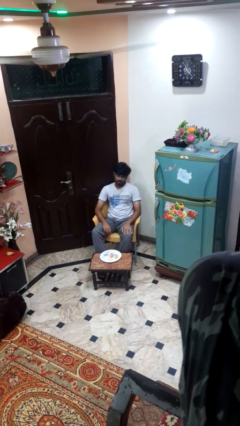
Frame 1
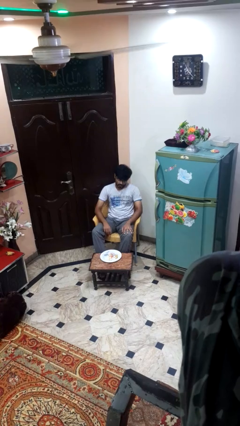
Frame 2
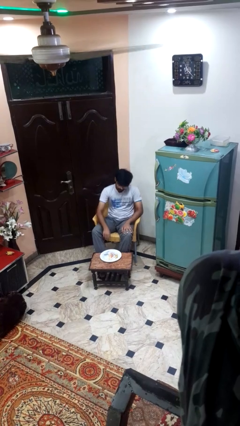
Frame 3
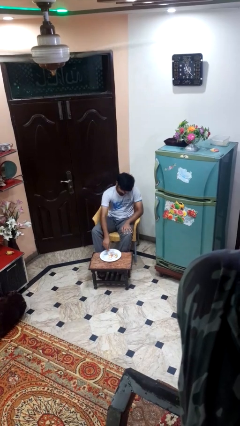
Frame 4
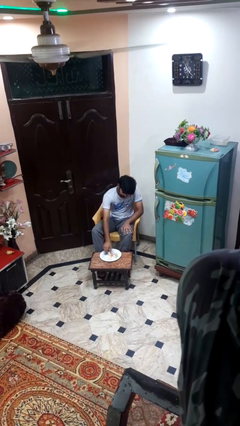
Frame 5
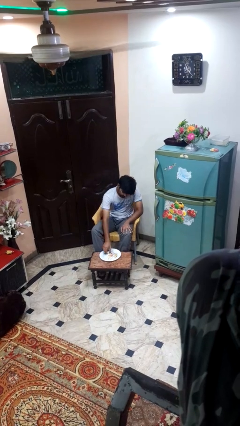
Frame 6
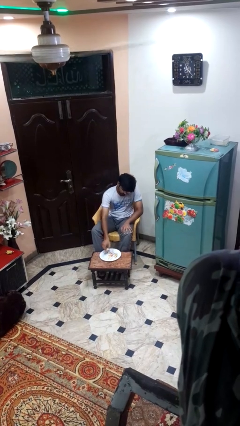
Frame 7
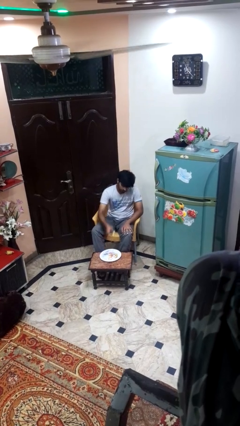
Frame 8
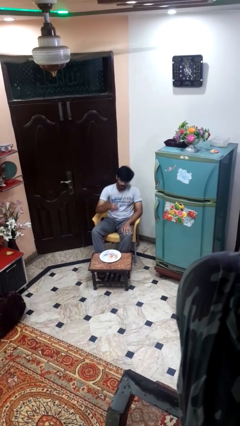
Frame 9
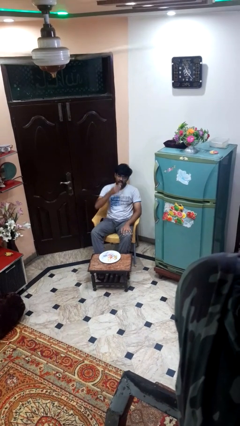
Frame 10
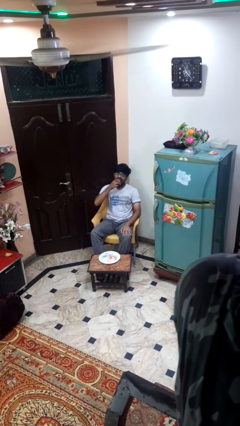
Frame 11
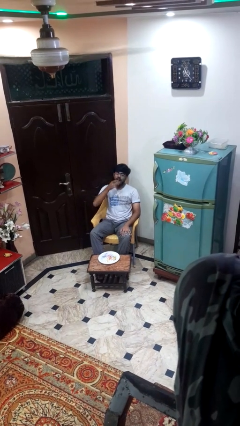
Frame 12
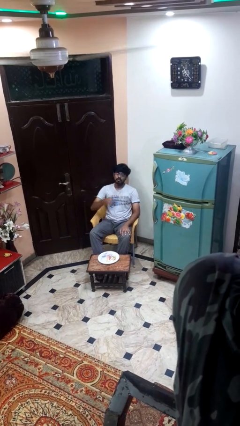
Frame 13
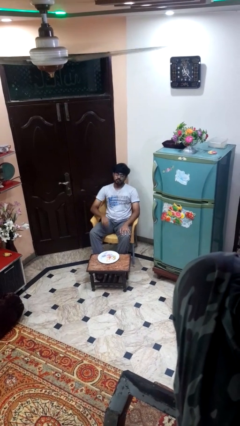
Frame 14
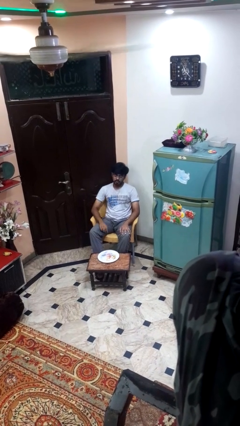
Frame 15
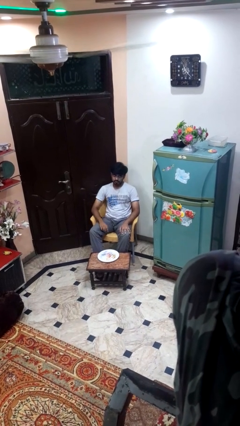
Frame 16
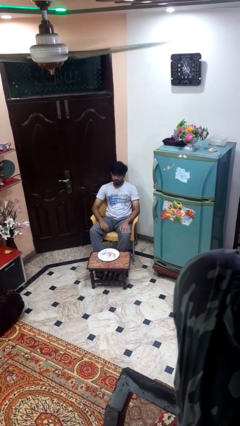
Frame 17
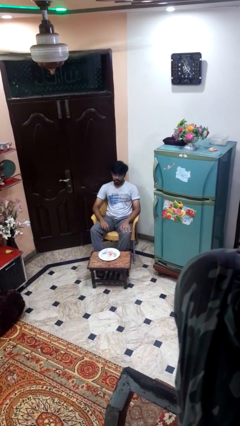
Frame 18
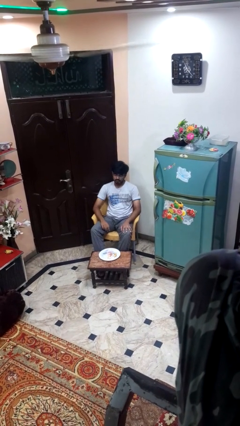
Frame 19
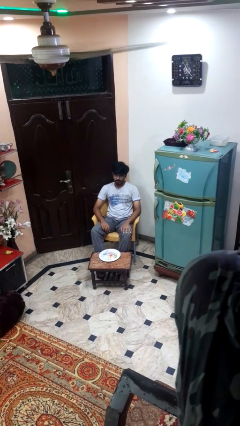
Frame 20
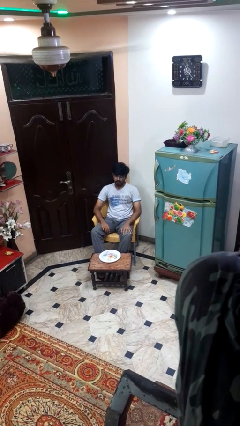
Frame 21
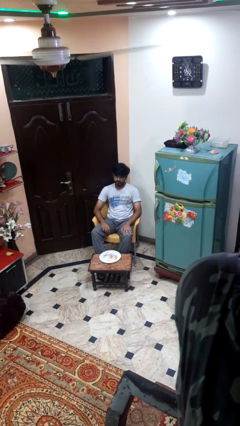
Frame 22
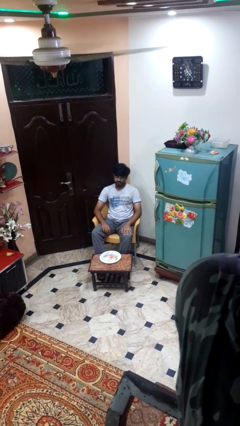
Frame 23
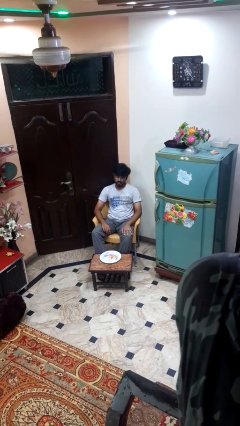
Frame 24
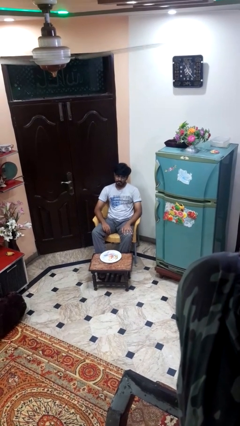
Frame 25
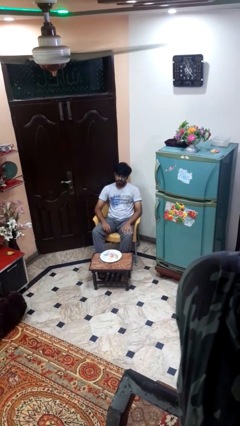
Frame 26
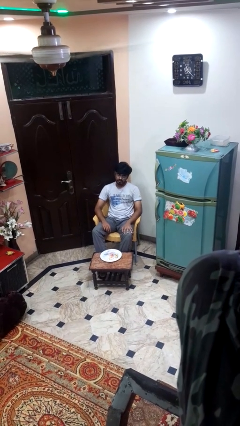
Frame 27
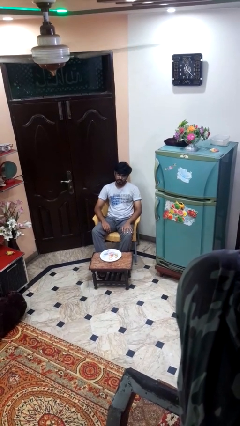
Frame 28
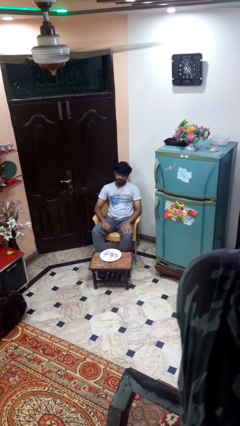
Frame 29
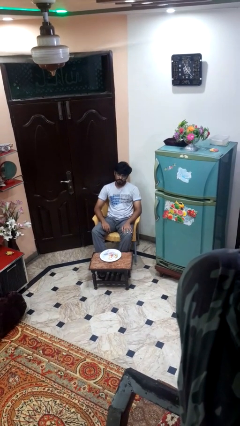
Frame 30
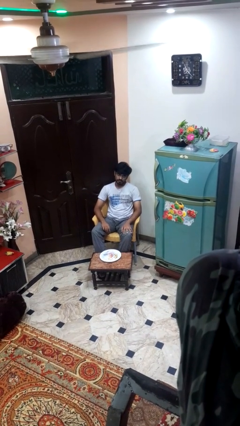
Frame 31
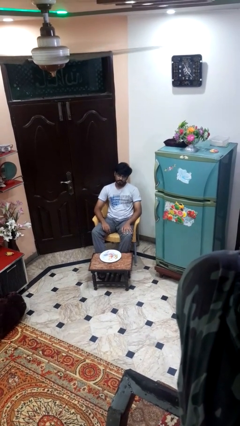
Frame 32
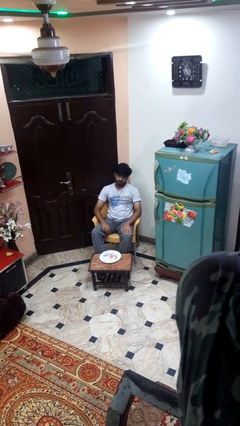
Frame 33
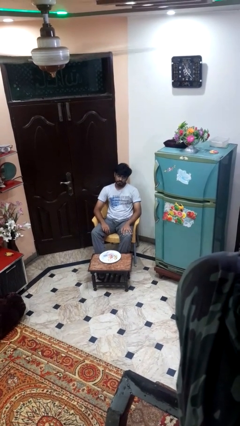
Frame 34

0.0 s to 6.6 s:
person eats with hands

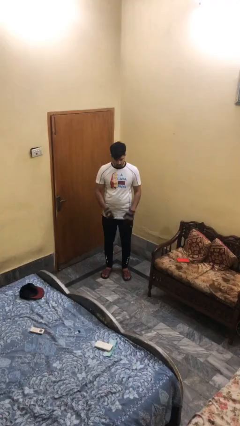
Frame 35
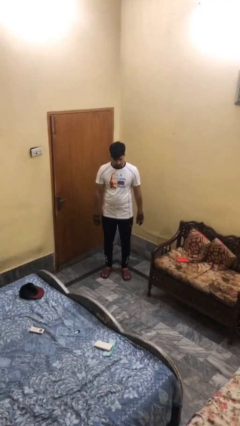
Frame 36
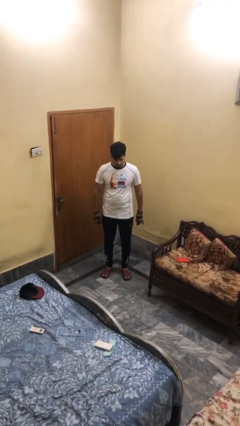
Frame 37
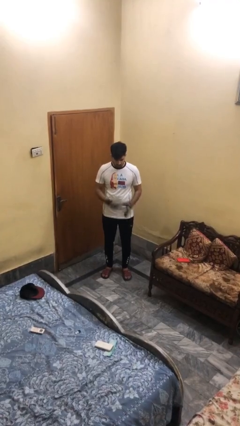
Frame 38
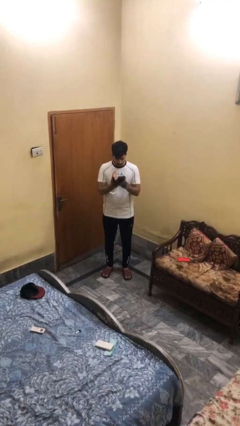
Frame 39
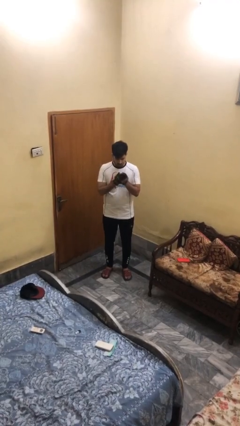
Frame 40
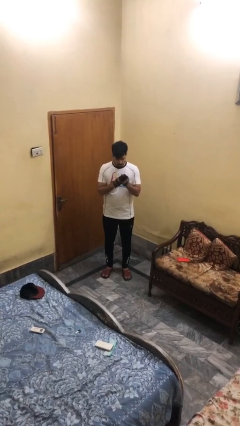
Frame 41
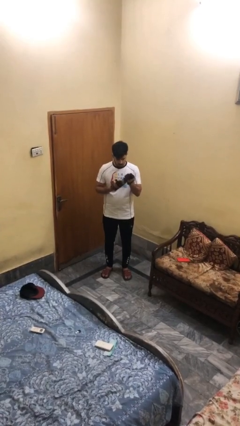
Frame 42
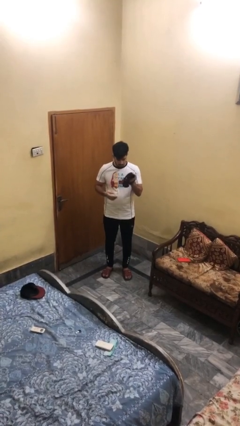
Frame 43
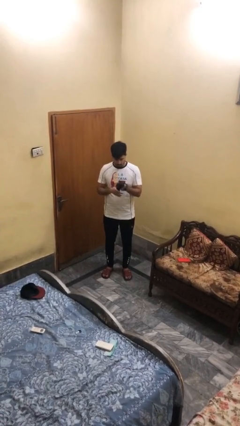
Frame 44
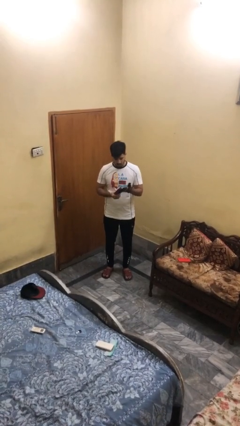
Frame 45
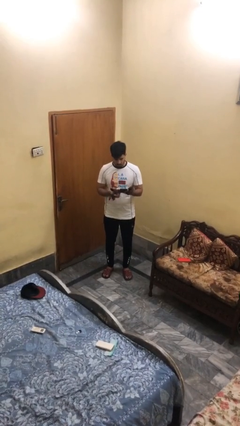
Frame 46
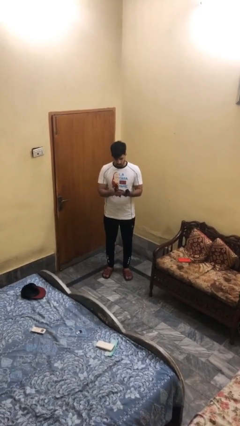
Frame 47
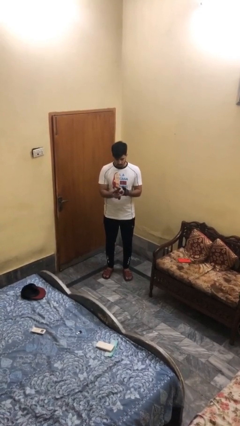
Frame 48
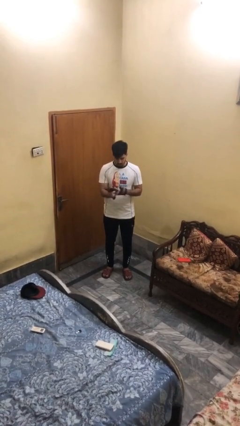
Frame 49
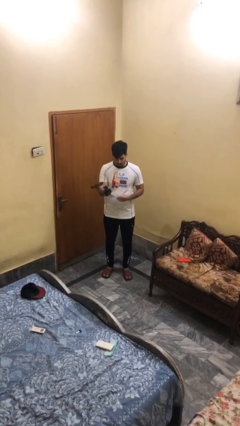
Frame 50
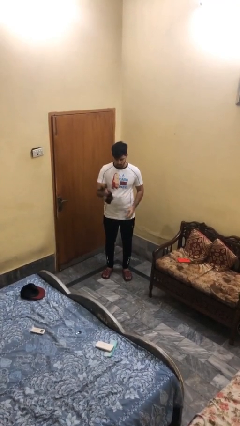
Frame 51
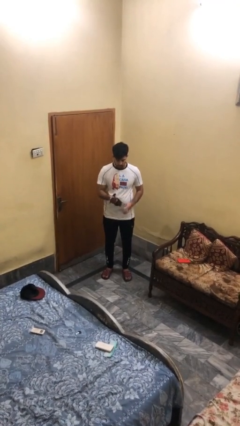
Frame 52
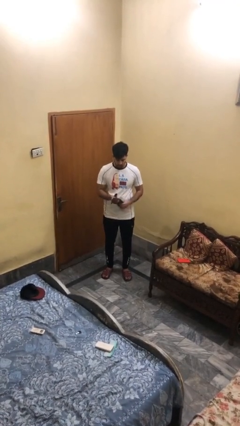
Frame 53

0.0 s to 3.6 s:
person takes off gloves

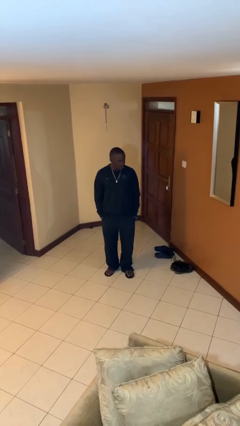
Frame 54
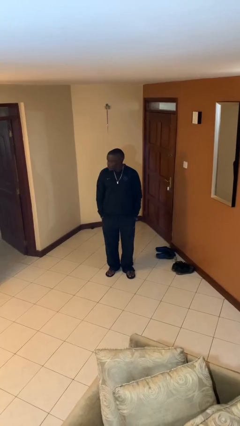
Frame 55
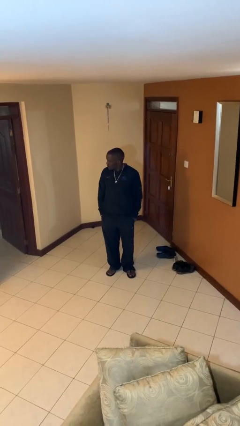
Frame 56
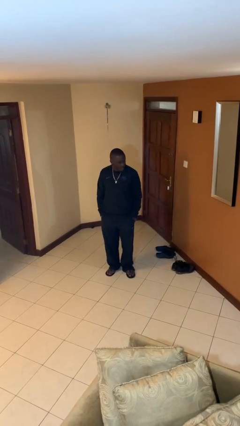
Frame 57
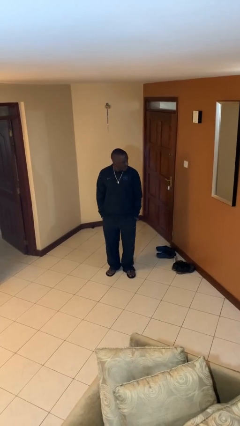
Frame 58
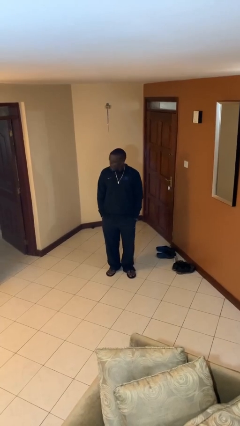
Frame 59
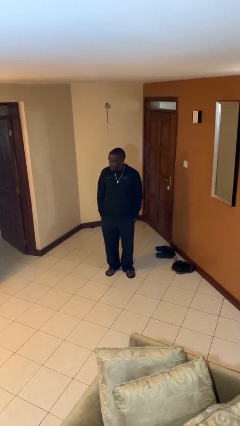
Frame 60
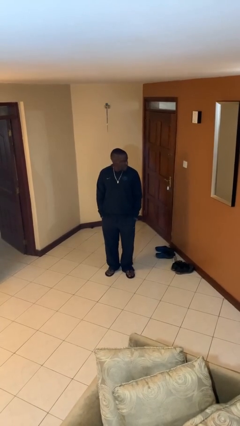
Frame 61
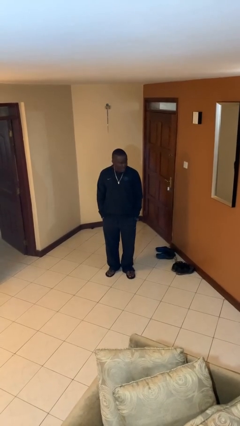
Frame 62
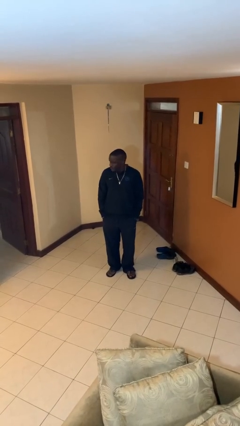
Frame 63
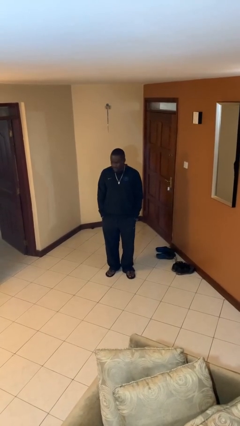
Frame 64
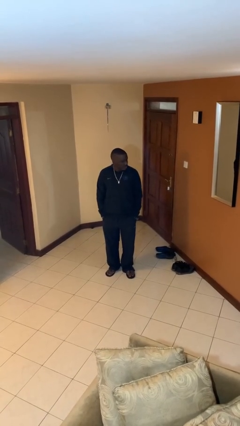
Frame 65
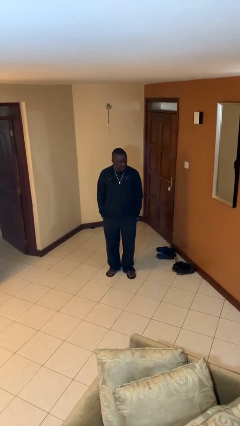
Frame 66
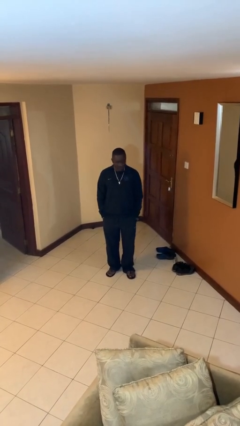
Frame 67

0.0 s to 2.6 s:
person shakes head

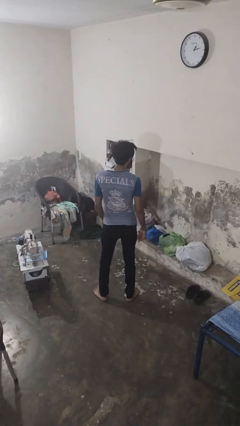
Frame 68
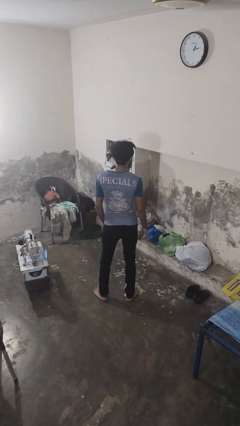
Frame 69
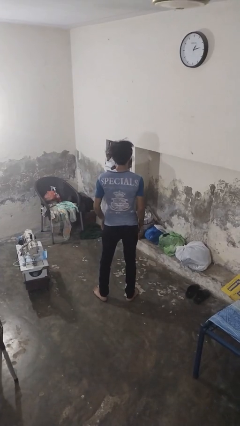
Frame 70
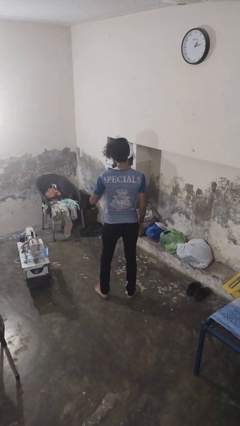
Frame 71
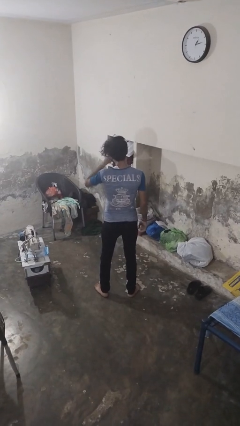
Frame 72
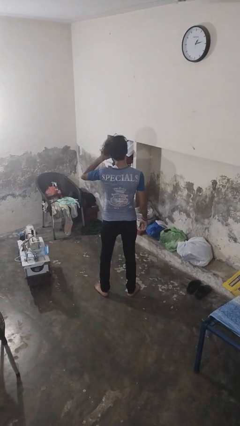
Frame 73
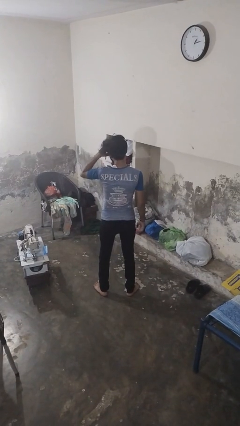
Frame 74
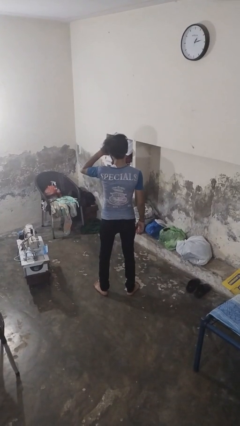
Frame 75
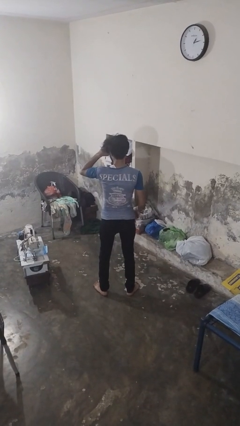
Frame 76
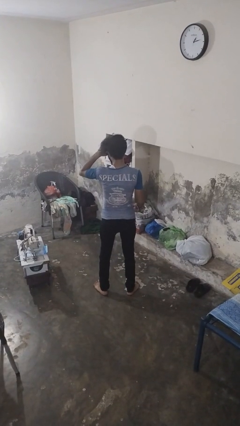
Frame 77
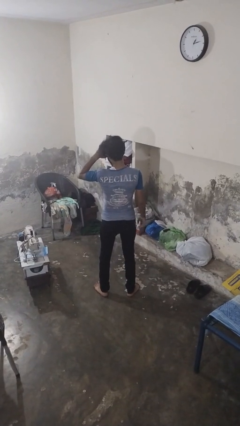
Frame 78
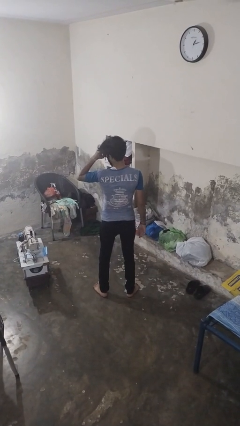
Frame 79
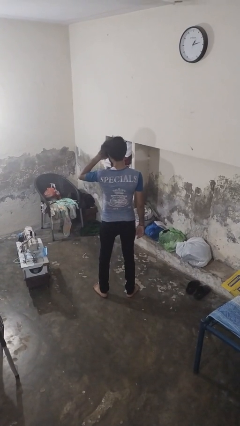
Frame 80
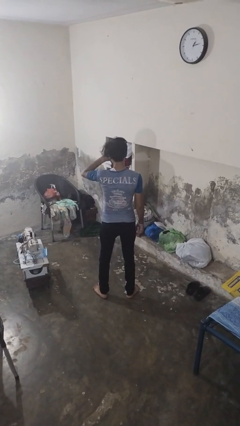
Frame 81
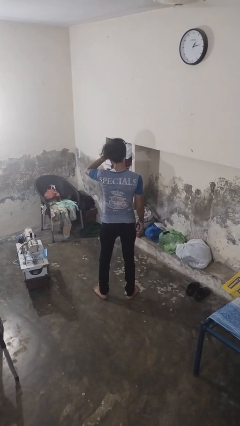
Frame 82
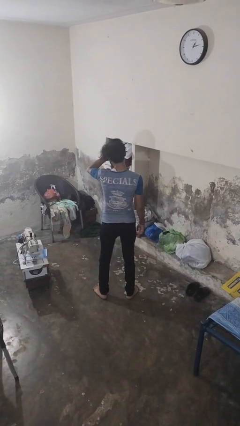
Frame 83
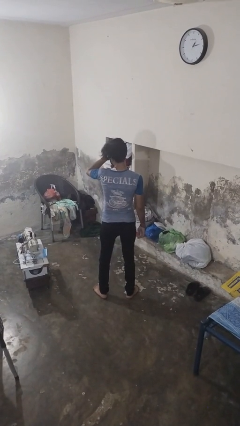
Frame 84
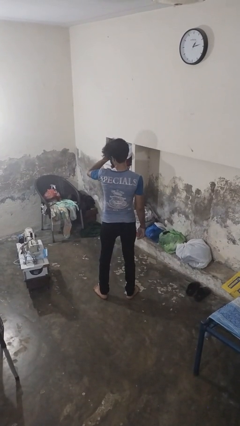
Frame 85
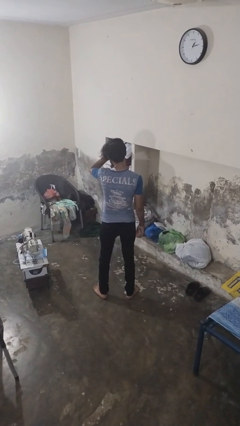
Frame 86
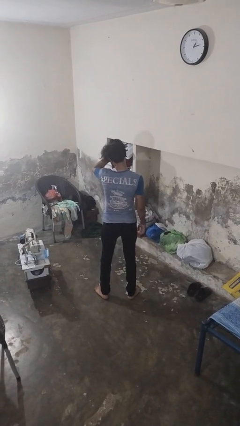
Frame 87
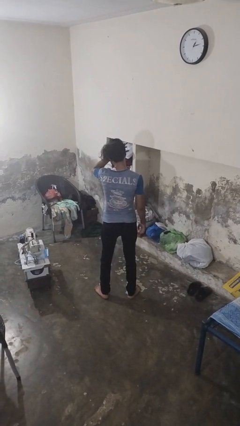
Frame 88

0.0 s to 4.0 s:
person rubs eyes

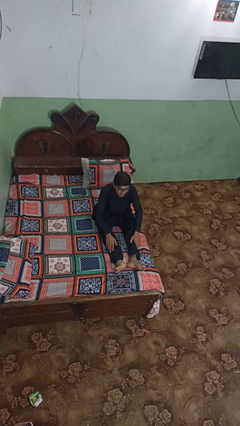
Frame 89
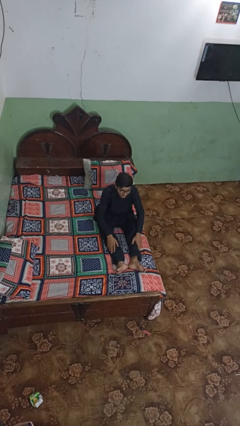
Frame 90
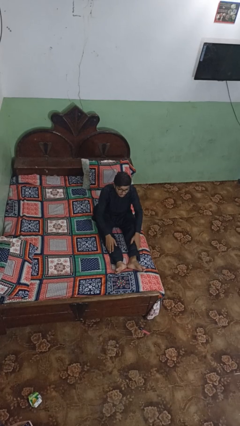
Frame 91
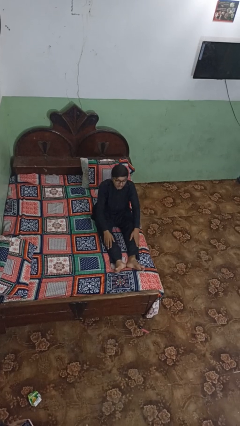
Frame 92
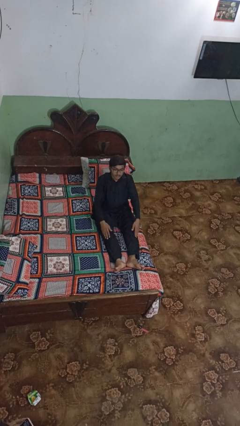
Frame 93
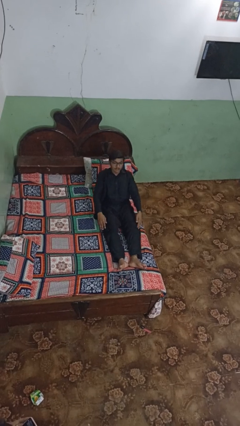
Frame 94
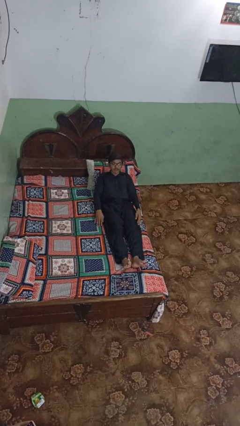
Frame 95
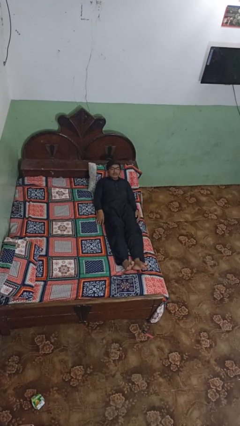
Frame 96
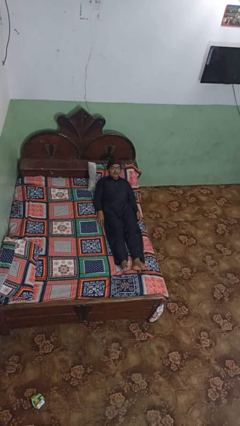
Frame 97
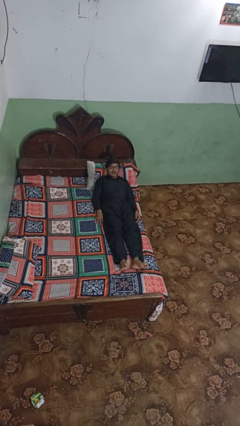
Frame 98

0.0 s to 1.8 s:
person lies down on bed
